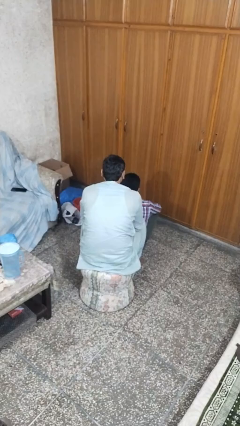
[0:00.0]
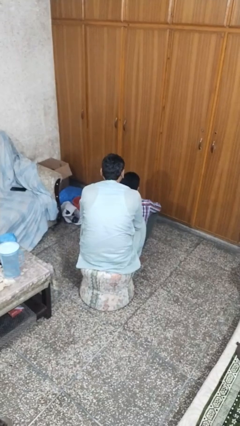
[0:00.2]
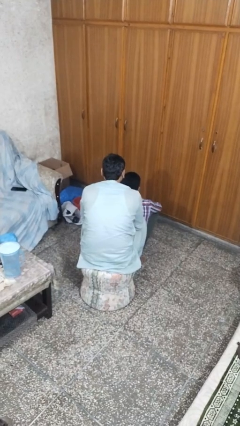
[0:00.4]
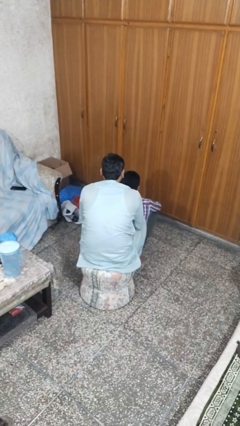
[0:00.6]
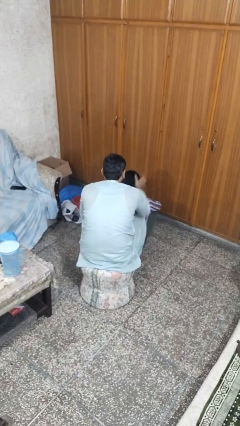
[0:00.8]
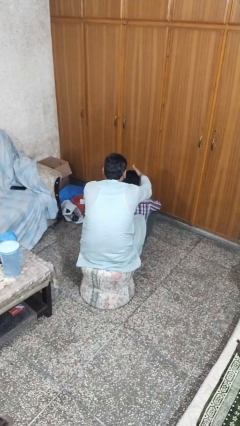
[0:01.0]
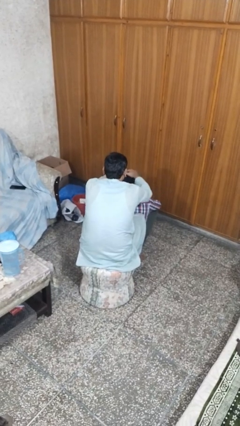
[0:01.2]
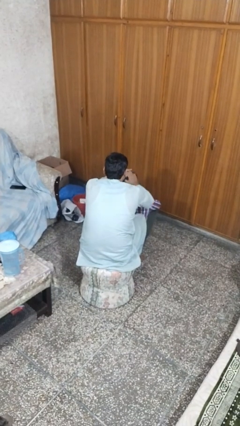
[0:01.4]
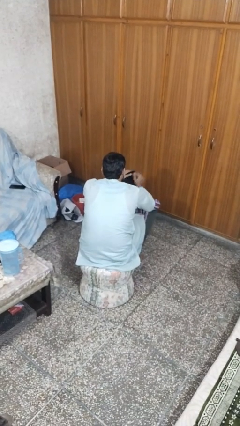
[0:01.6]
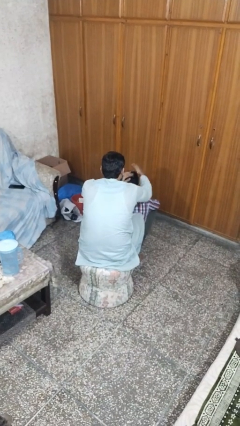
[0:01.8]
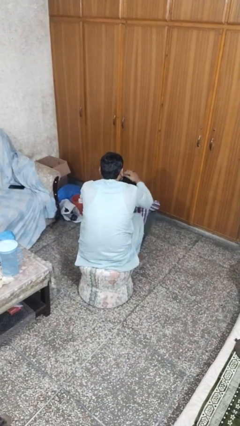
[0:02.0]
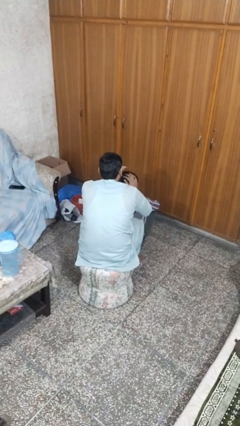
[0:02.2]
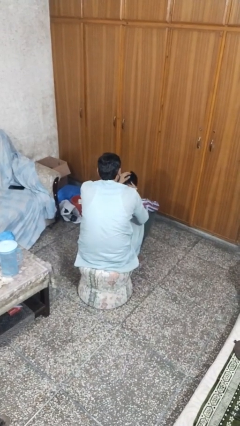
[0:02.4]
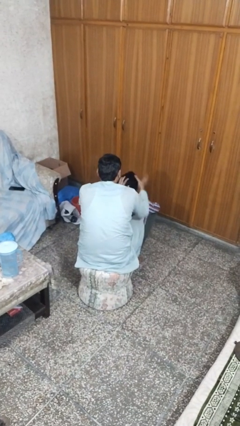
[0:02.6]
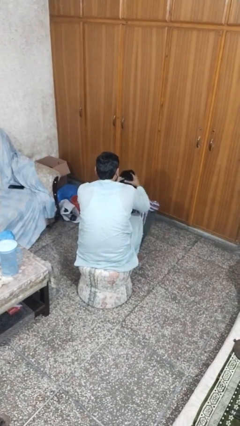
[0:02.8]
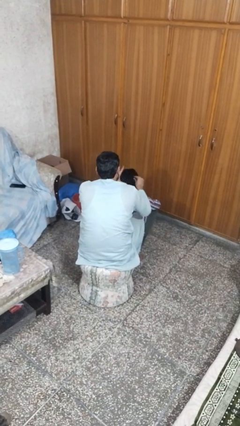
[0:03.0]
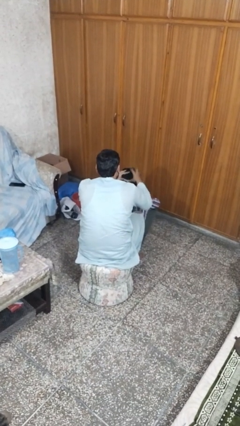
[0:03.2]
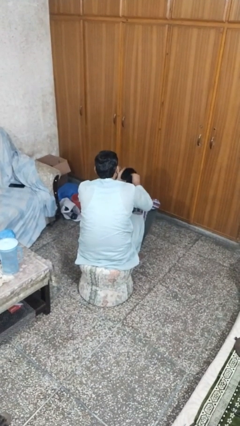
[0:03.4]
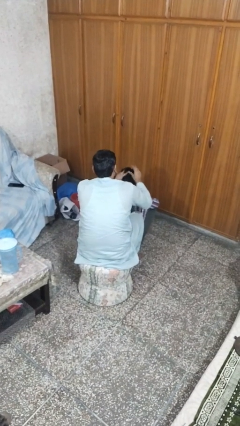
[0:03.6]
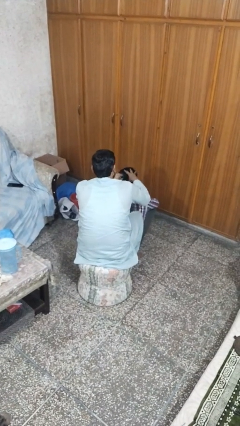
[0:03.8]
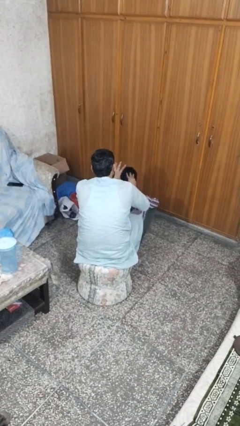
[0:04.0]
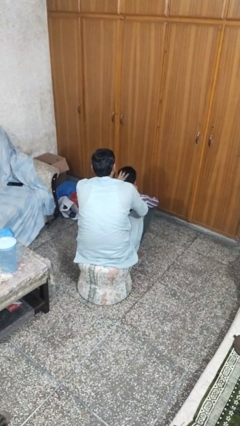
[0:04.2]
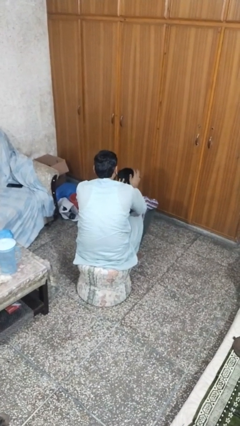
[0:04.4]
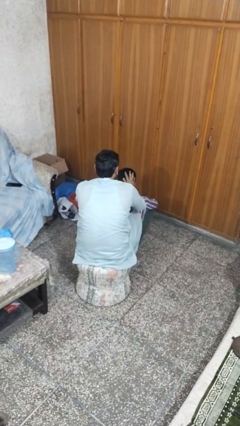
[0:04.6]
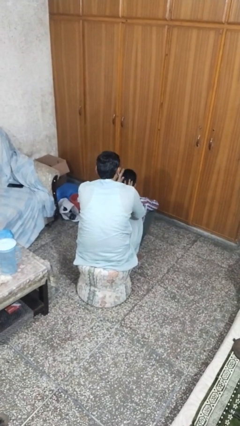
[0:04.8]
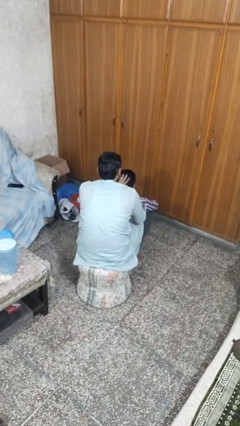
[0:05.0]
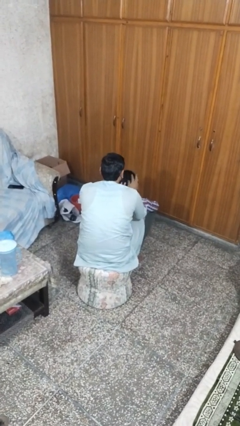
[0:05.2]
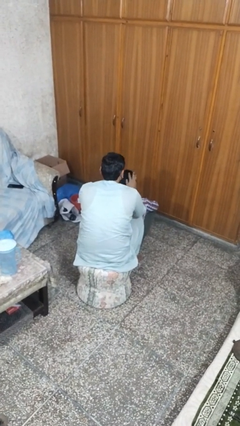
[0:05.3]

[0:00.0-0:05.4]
person braids hair of person

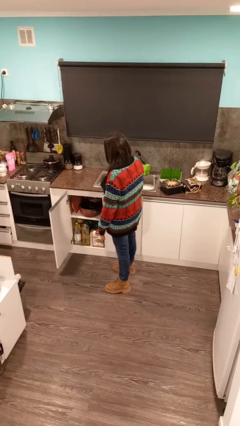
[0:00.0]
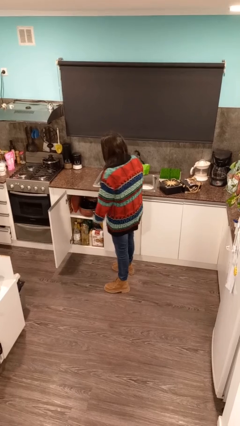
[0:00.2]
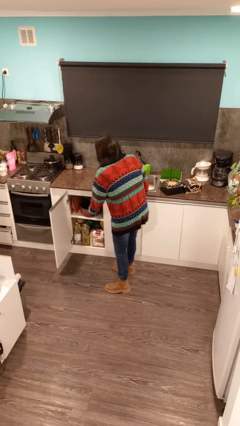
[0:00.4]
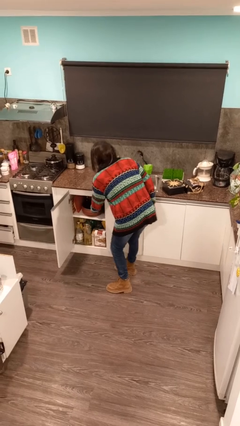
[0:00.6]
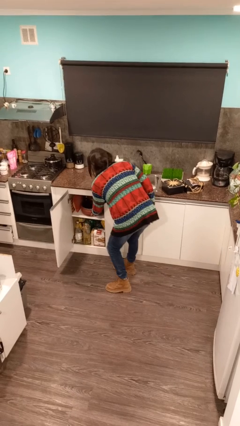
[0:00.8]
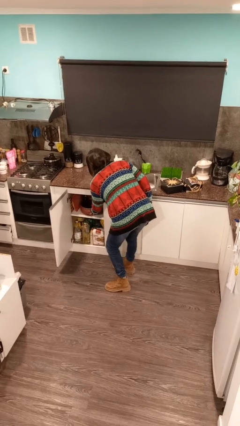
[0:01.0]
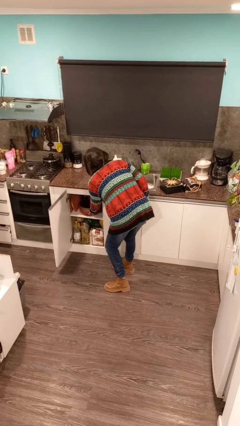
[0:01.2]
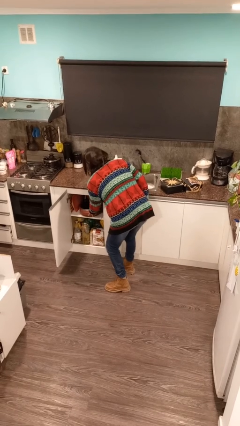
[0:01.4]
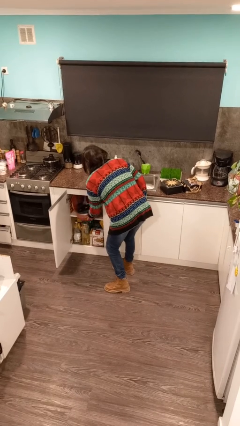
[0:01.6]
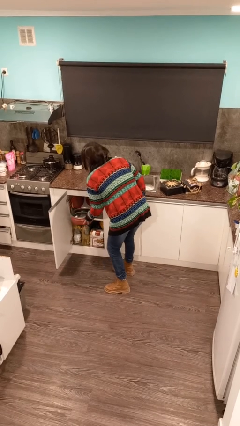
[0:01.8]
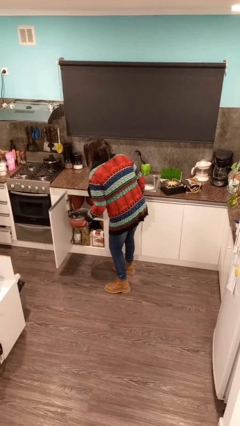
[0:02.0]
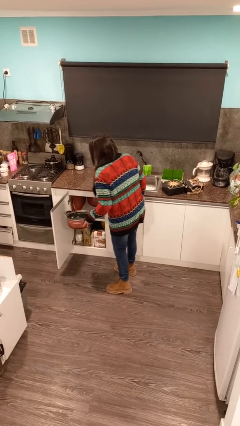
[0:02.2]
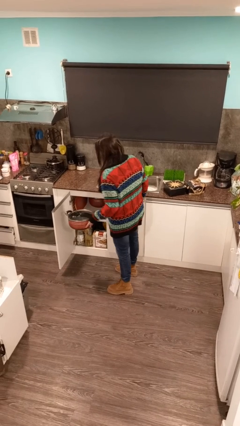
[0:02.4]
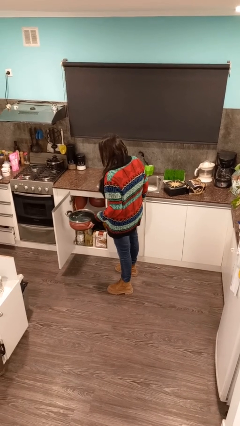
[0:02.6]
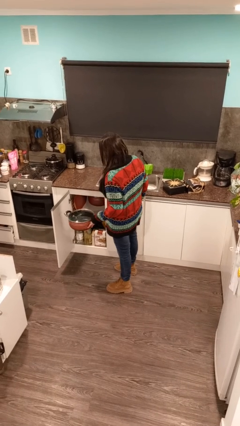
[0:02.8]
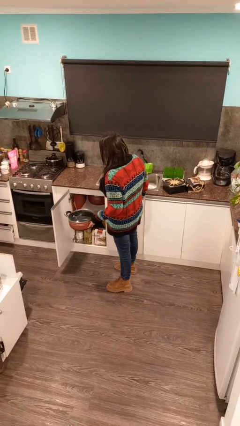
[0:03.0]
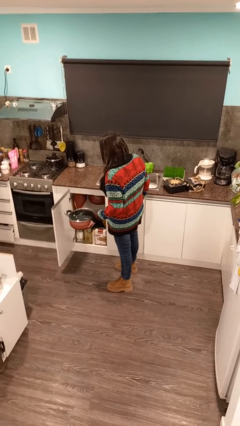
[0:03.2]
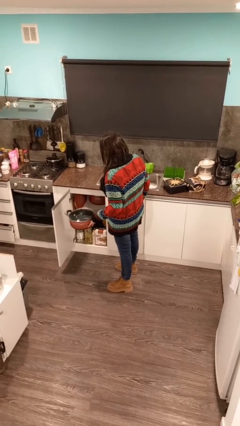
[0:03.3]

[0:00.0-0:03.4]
person picks up object from cabinet

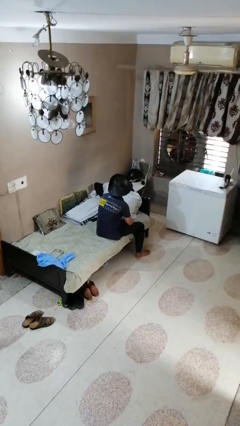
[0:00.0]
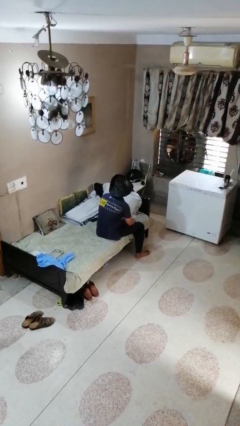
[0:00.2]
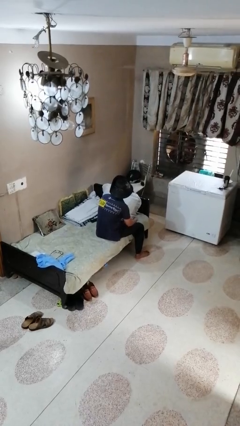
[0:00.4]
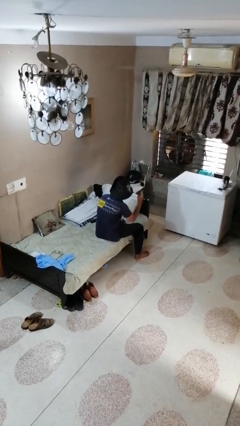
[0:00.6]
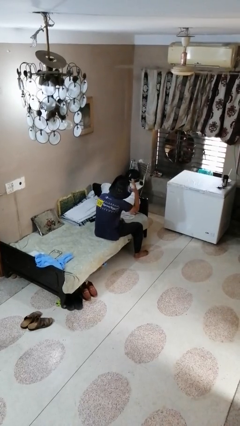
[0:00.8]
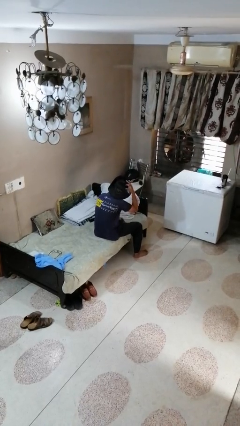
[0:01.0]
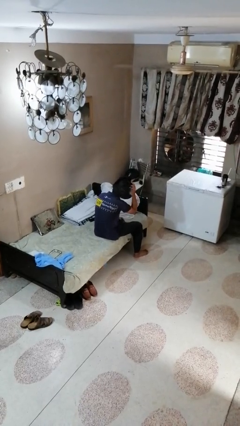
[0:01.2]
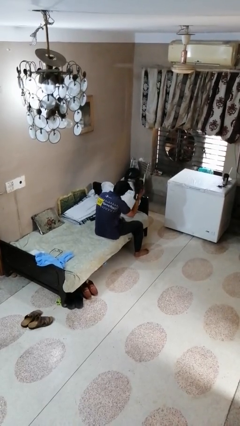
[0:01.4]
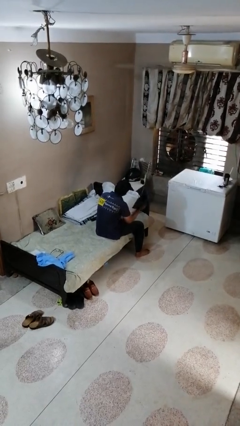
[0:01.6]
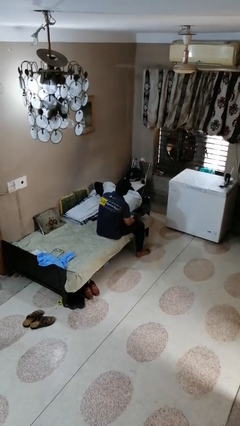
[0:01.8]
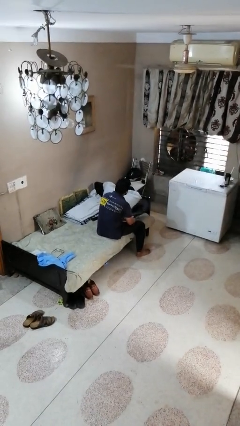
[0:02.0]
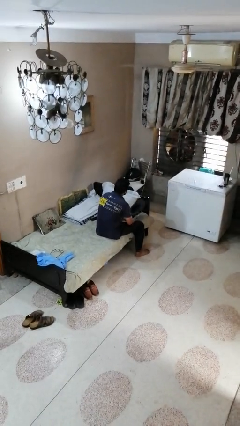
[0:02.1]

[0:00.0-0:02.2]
person takes off hat

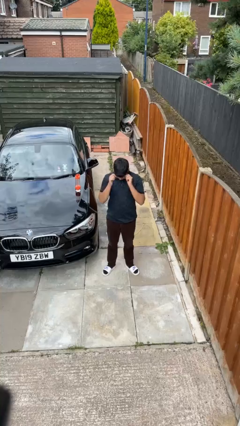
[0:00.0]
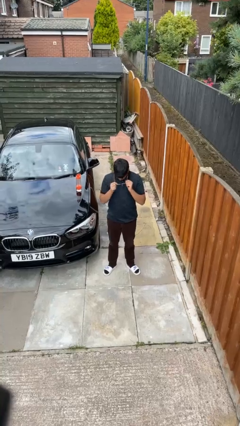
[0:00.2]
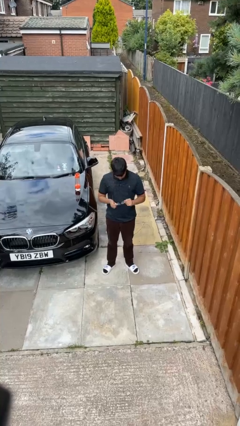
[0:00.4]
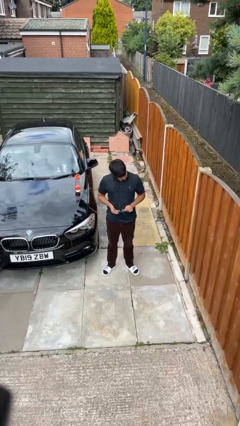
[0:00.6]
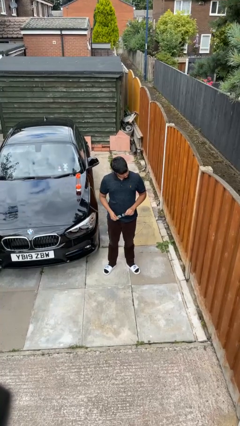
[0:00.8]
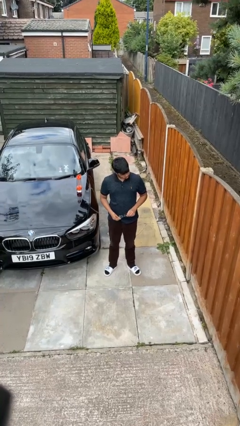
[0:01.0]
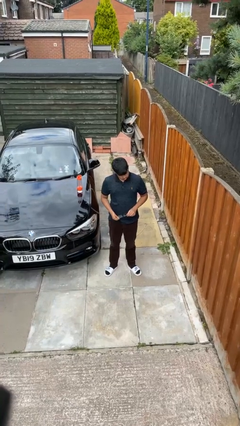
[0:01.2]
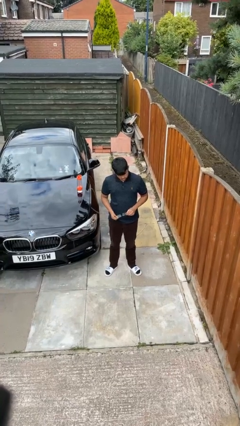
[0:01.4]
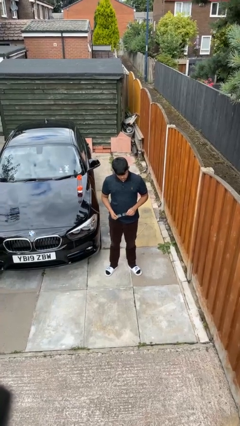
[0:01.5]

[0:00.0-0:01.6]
person takes off glasses

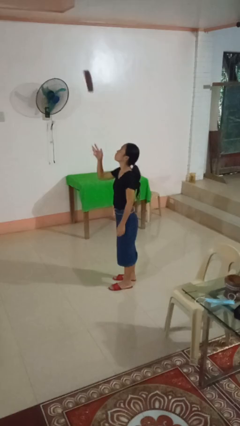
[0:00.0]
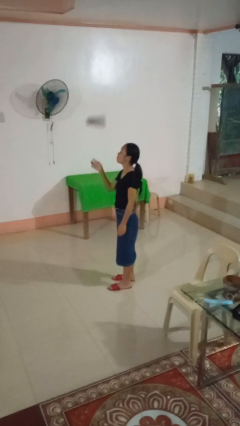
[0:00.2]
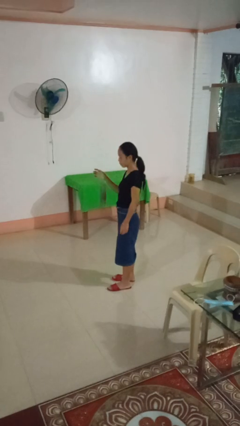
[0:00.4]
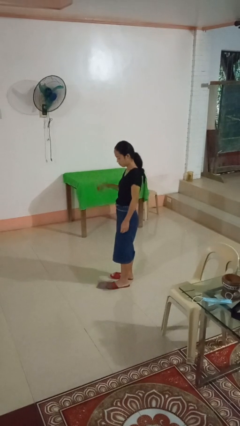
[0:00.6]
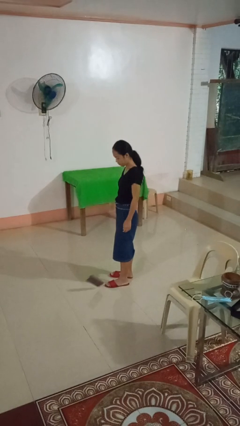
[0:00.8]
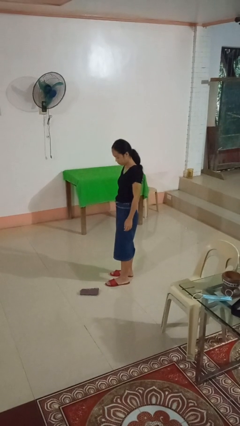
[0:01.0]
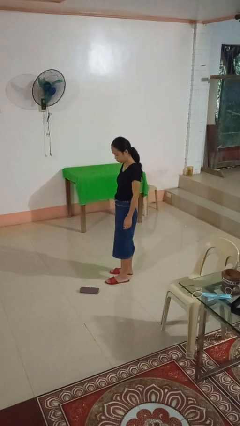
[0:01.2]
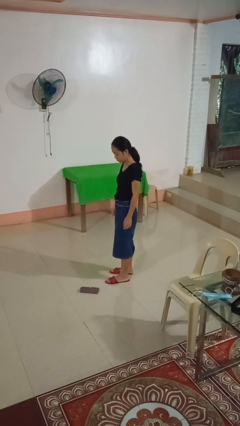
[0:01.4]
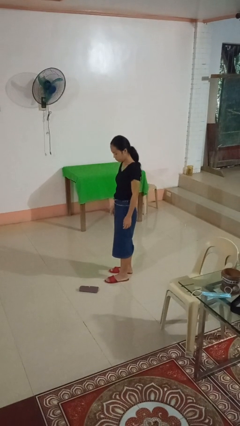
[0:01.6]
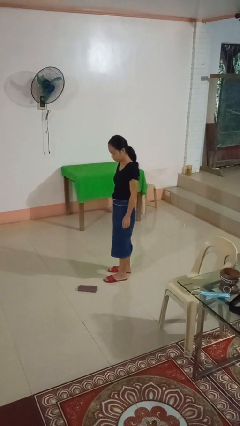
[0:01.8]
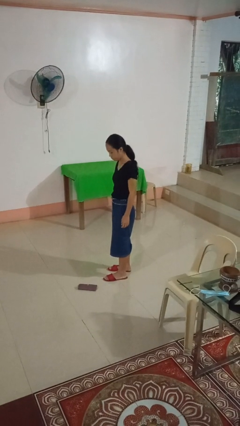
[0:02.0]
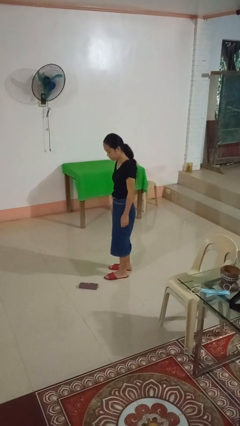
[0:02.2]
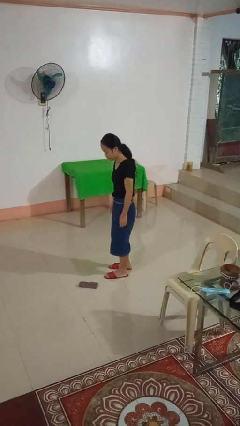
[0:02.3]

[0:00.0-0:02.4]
person throws object into air

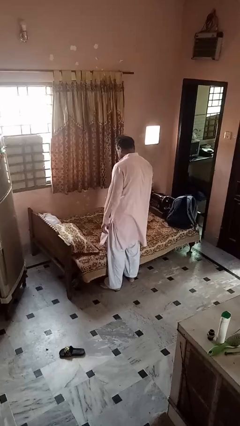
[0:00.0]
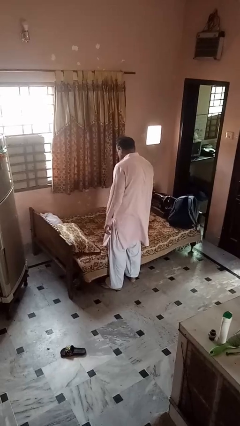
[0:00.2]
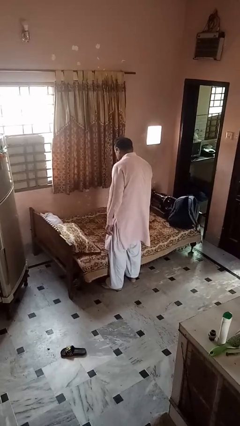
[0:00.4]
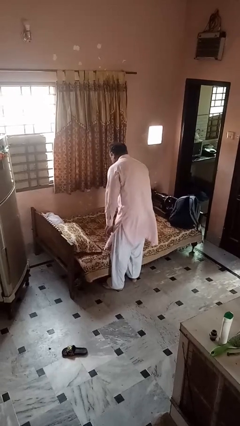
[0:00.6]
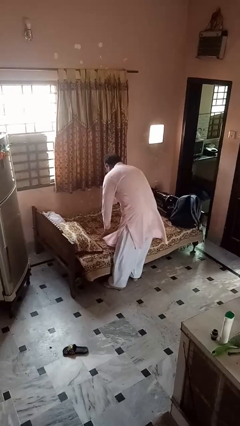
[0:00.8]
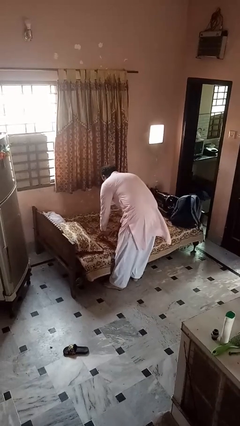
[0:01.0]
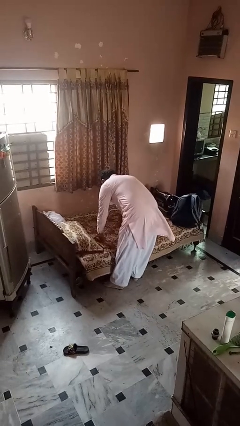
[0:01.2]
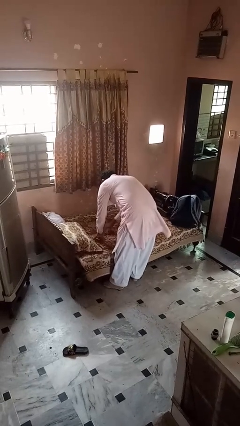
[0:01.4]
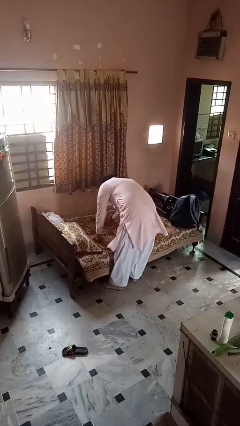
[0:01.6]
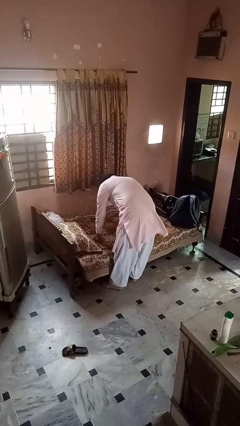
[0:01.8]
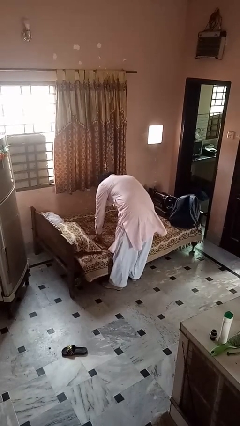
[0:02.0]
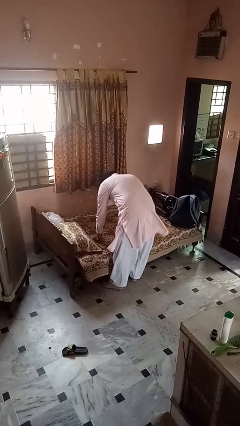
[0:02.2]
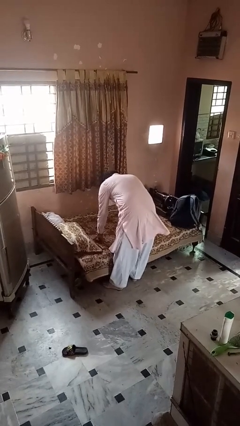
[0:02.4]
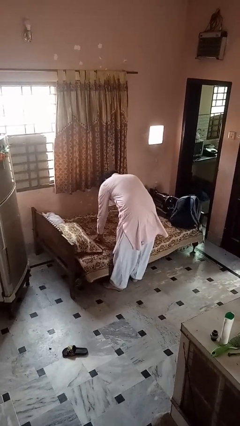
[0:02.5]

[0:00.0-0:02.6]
person searches under bed
